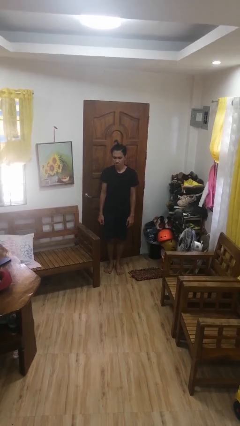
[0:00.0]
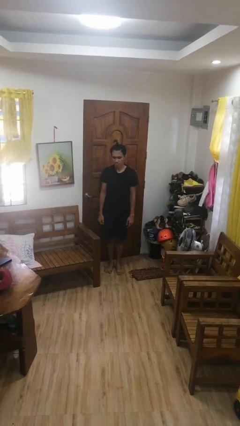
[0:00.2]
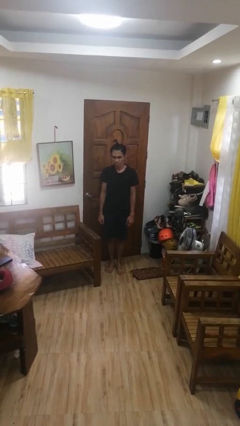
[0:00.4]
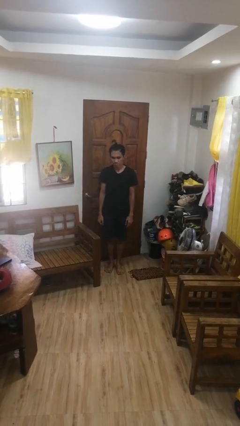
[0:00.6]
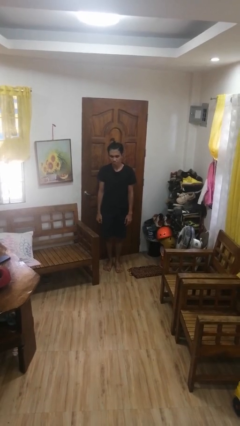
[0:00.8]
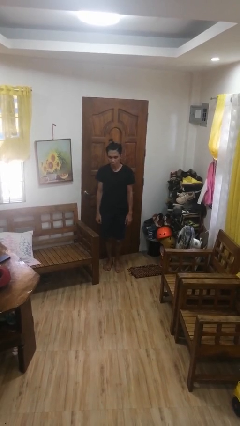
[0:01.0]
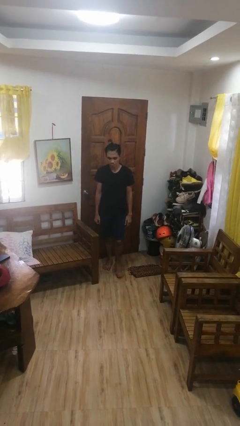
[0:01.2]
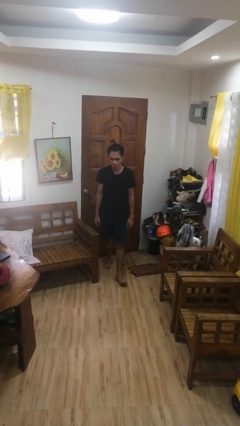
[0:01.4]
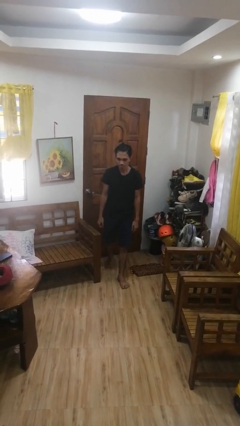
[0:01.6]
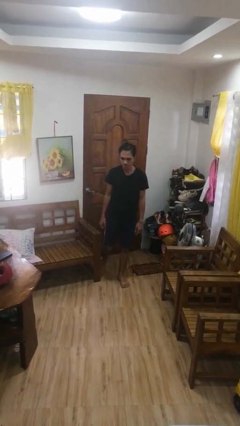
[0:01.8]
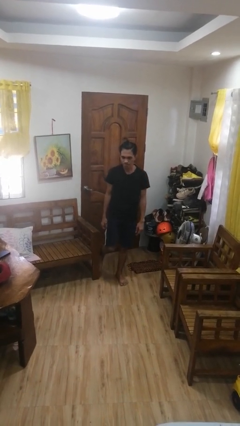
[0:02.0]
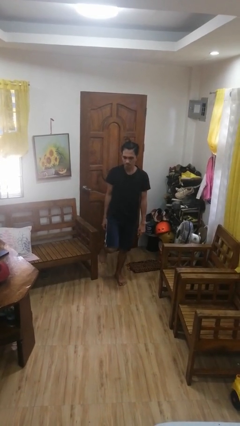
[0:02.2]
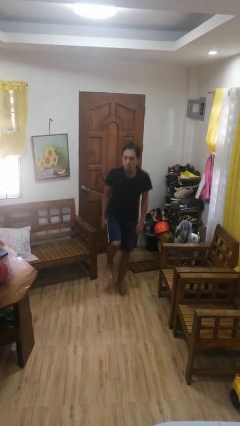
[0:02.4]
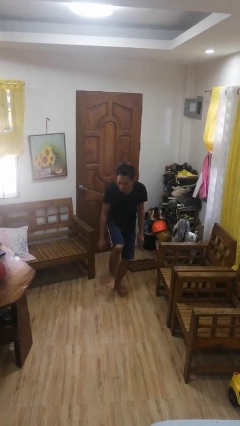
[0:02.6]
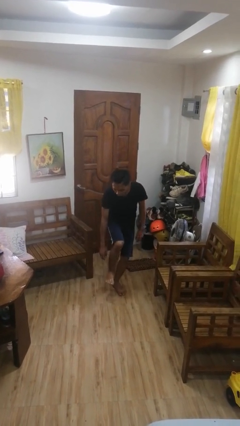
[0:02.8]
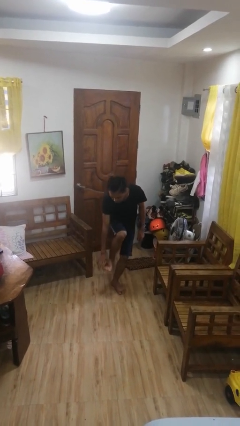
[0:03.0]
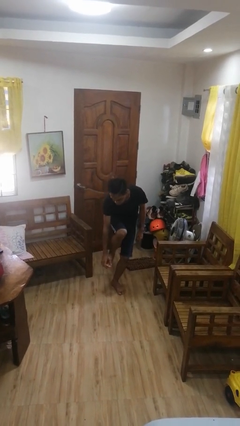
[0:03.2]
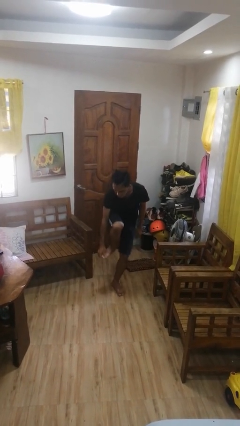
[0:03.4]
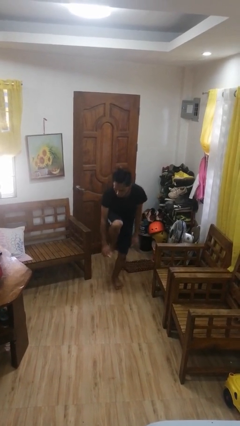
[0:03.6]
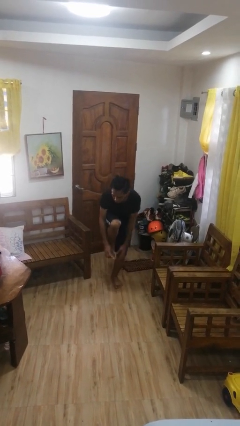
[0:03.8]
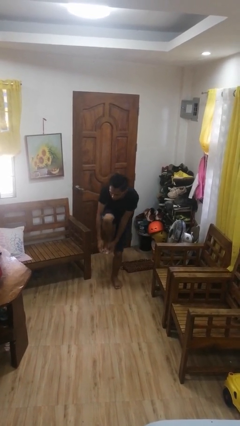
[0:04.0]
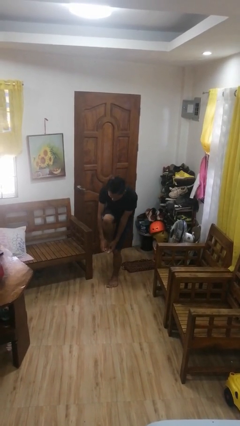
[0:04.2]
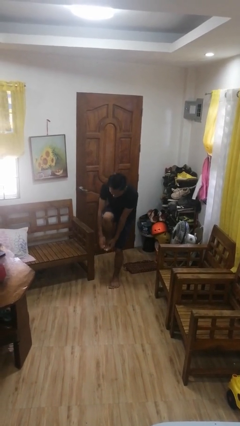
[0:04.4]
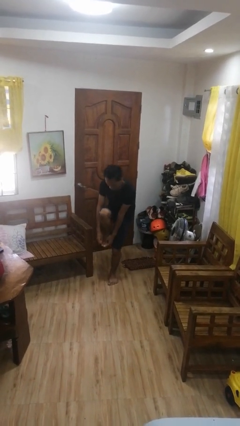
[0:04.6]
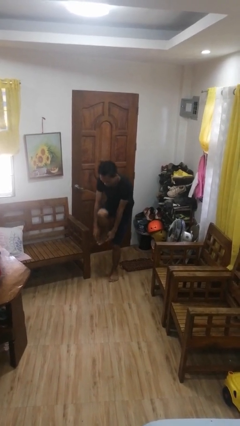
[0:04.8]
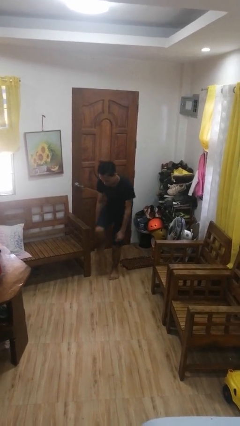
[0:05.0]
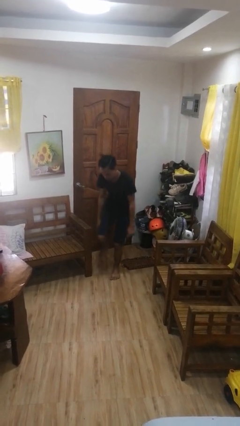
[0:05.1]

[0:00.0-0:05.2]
person stubs toe

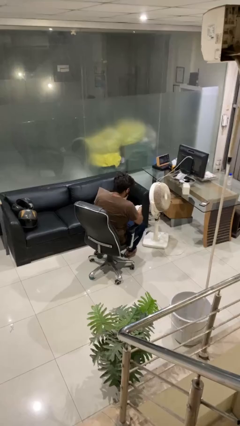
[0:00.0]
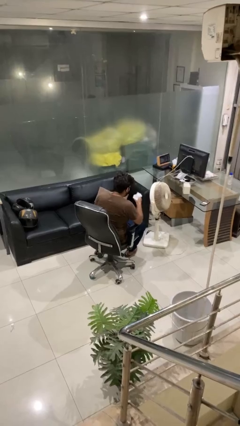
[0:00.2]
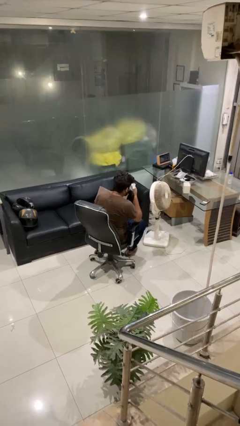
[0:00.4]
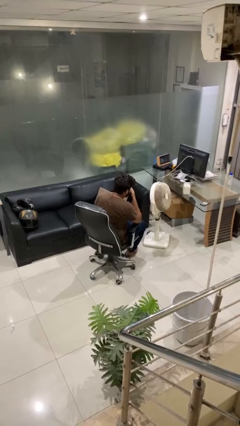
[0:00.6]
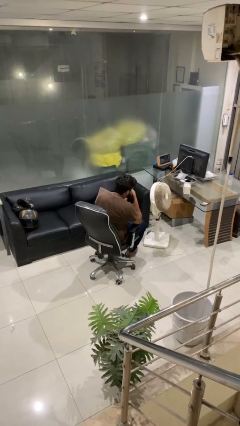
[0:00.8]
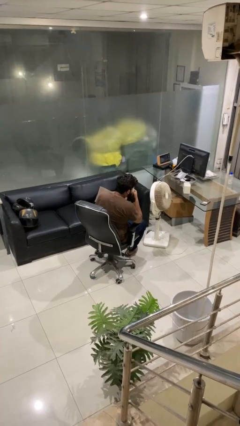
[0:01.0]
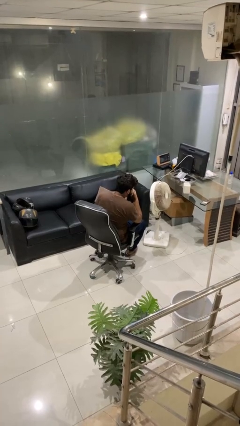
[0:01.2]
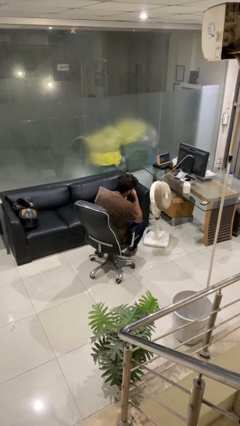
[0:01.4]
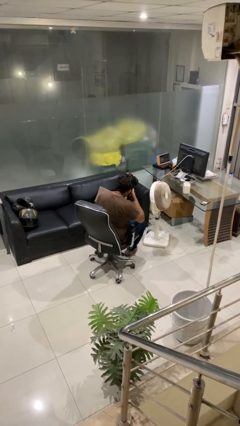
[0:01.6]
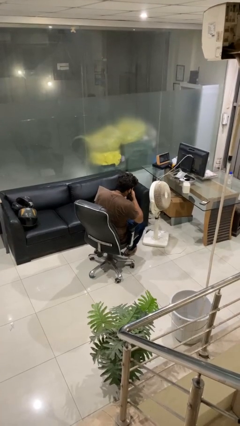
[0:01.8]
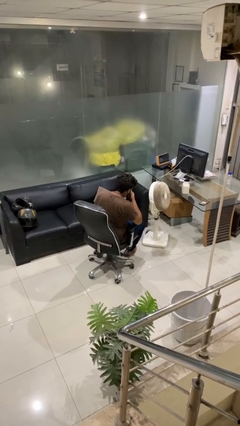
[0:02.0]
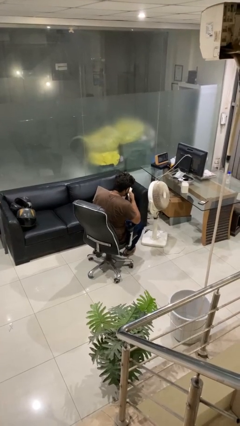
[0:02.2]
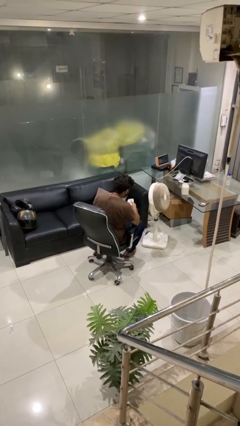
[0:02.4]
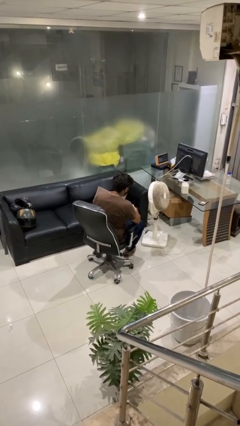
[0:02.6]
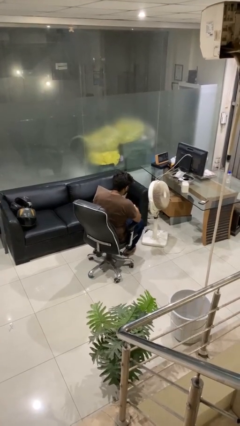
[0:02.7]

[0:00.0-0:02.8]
person blows nose

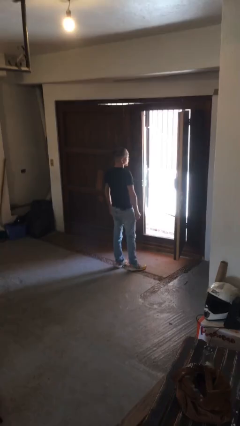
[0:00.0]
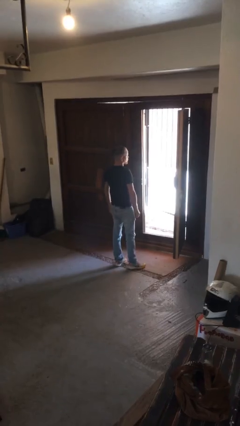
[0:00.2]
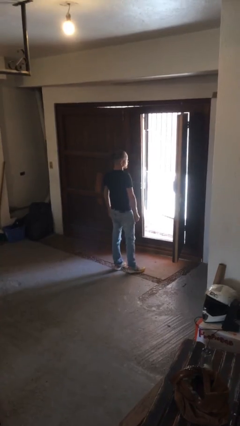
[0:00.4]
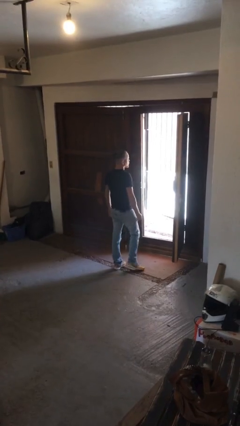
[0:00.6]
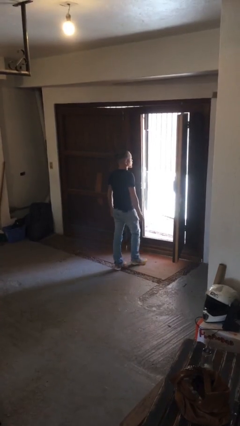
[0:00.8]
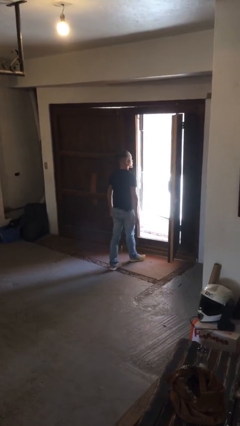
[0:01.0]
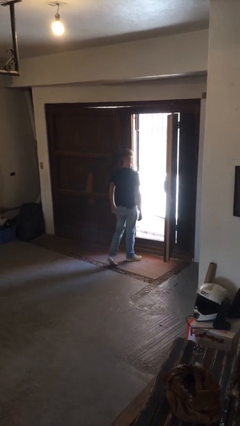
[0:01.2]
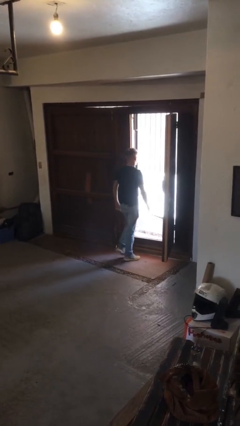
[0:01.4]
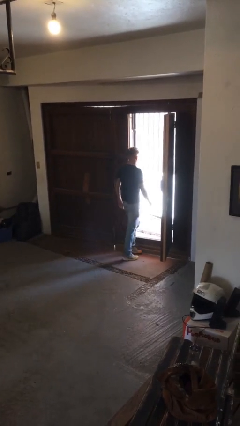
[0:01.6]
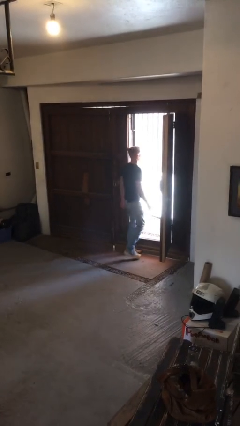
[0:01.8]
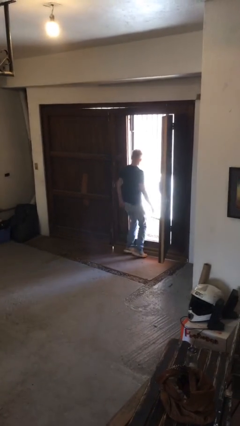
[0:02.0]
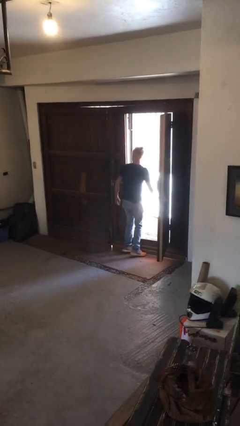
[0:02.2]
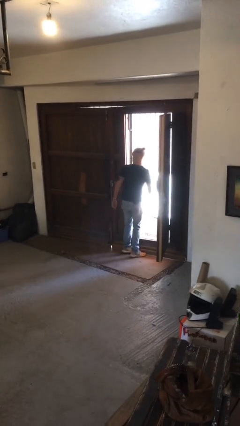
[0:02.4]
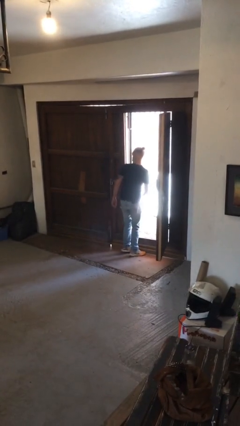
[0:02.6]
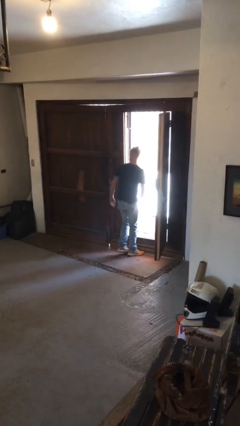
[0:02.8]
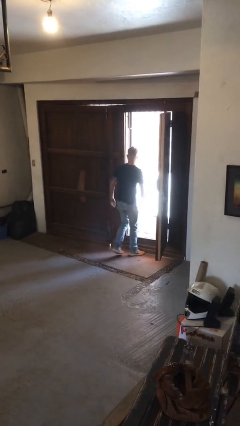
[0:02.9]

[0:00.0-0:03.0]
person bumps into wall

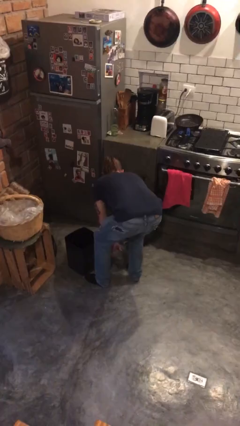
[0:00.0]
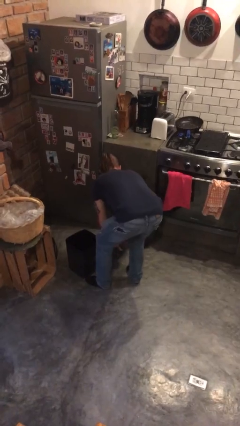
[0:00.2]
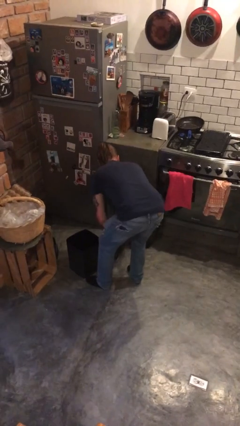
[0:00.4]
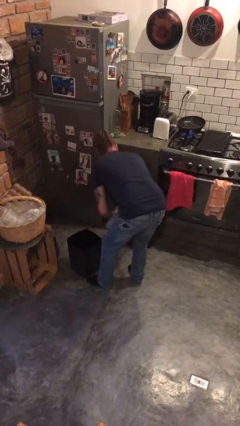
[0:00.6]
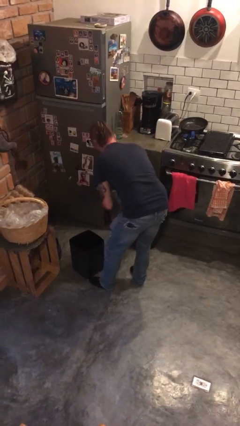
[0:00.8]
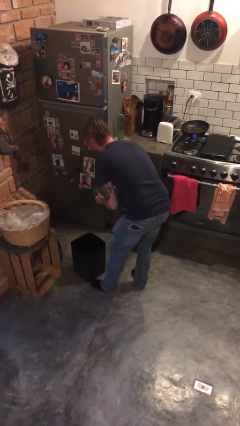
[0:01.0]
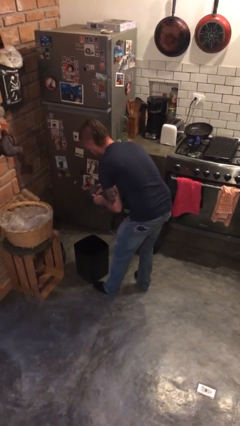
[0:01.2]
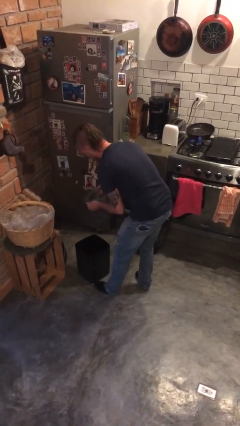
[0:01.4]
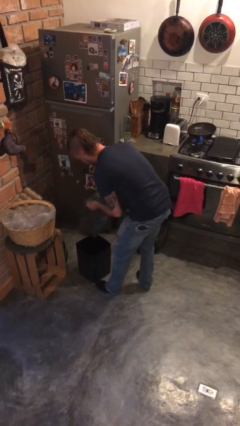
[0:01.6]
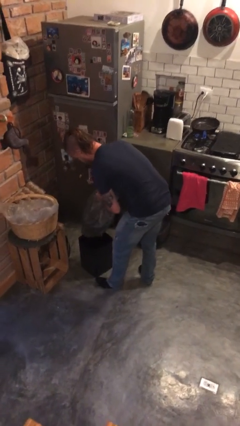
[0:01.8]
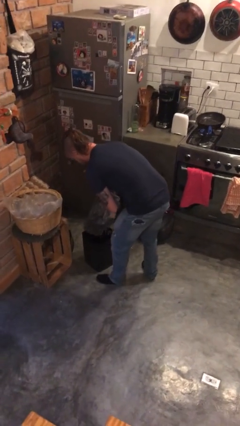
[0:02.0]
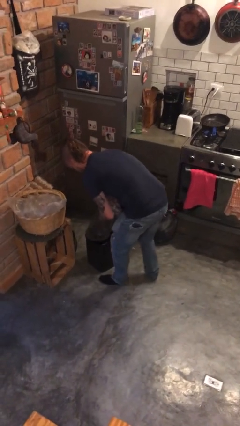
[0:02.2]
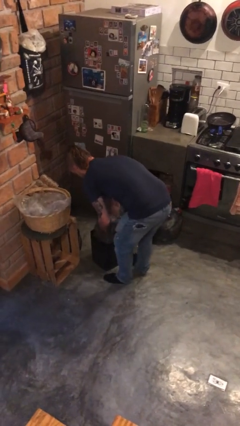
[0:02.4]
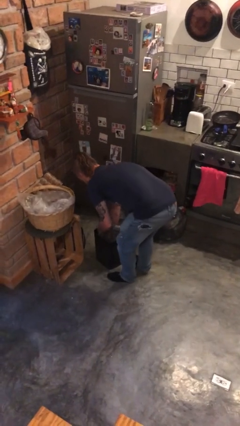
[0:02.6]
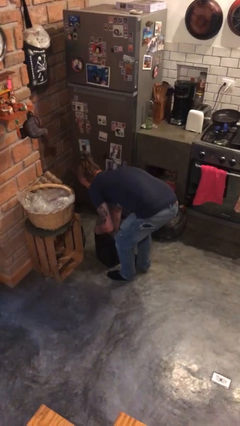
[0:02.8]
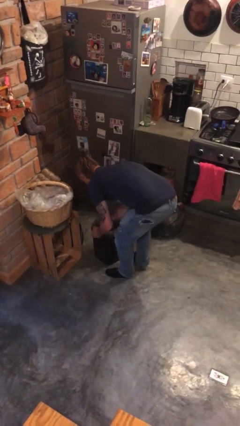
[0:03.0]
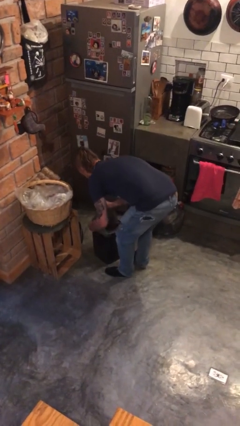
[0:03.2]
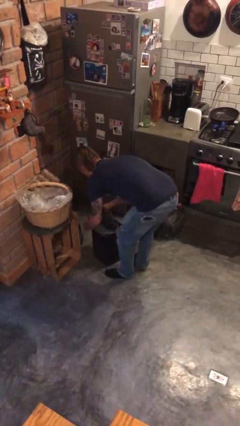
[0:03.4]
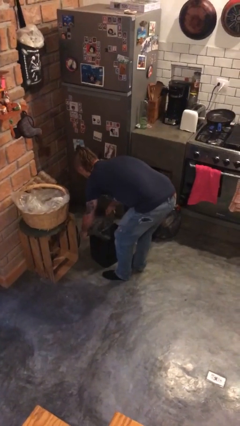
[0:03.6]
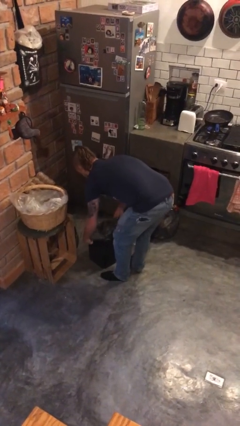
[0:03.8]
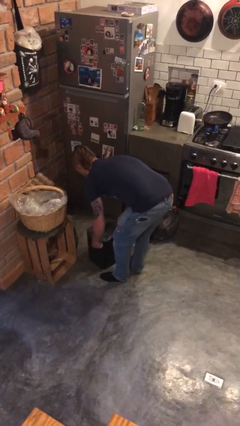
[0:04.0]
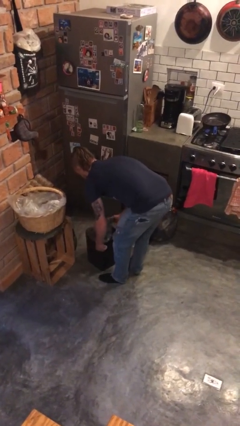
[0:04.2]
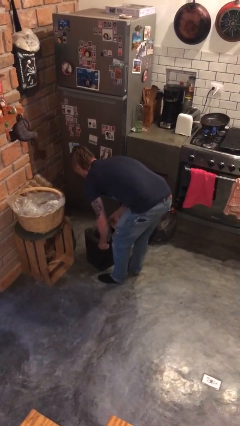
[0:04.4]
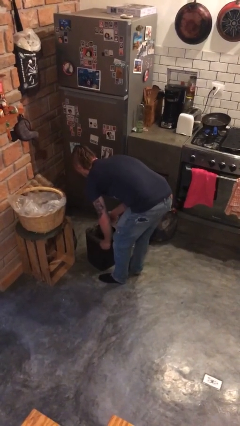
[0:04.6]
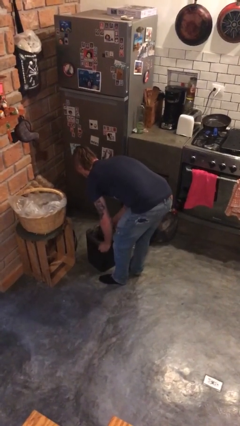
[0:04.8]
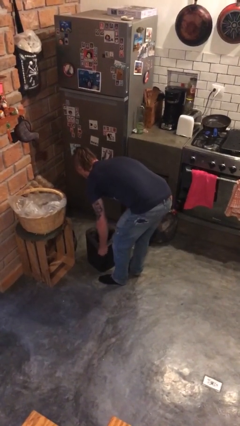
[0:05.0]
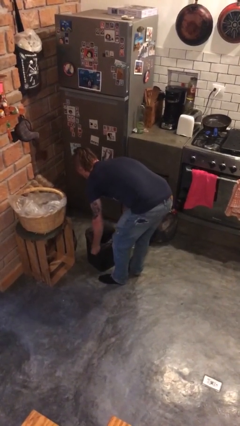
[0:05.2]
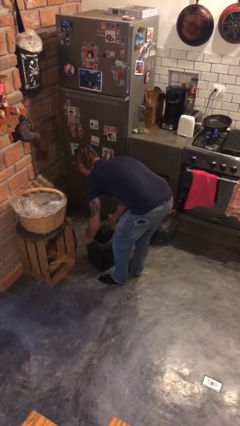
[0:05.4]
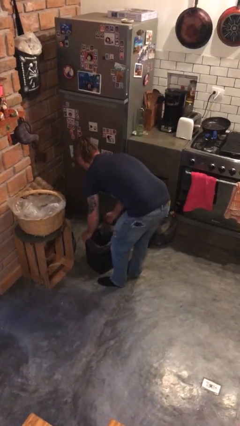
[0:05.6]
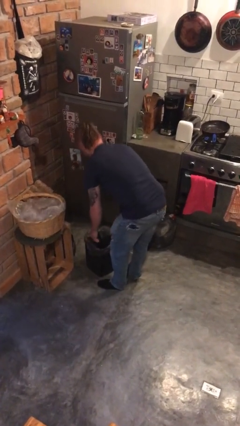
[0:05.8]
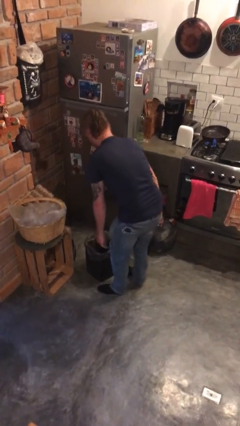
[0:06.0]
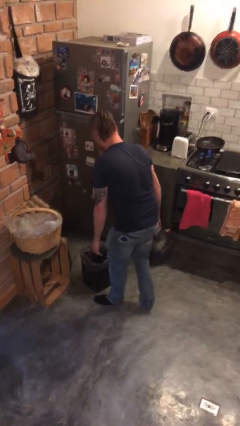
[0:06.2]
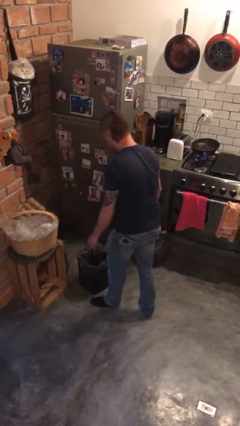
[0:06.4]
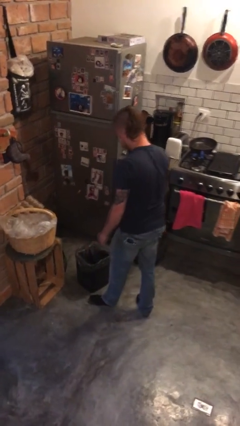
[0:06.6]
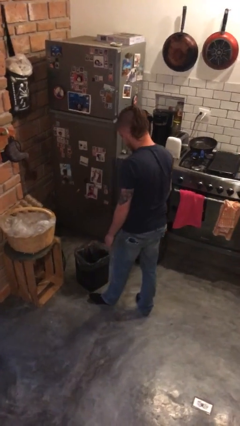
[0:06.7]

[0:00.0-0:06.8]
person inserts trashbag into trashcan
